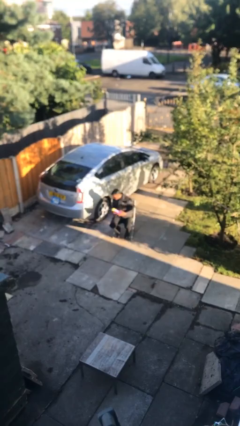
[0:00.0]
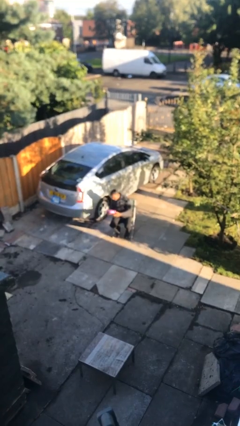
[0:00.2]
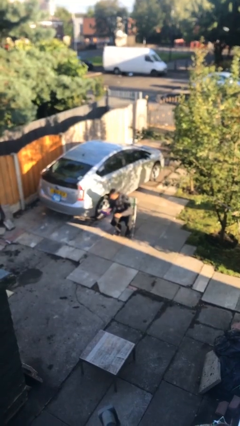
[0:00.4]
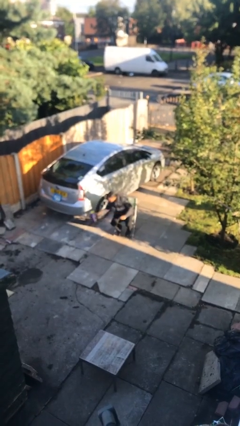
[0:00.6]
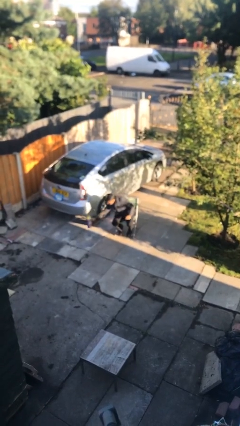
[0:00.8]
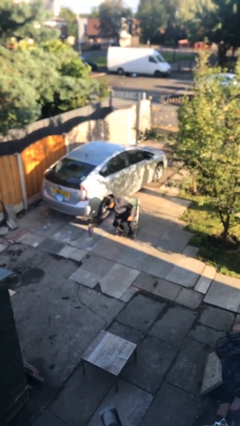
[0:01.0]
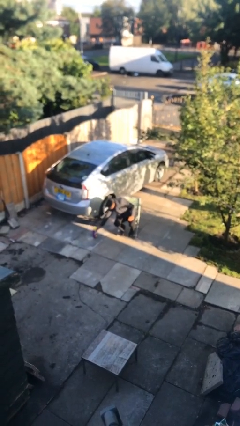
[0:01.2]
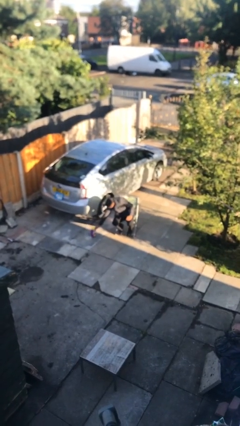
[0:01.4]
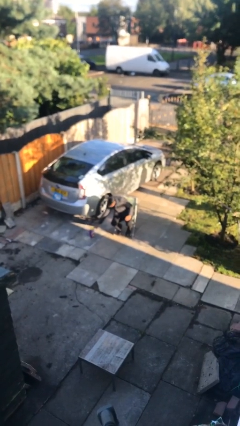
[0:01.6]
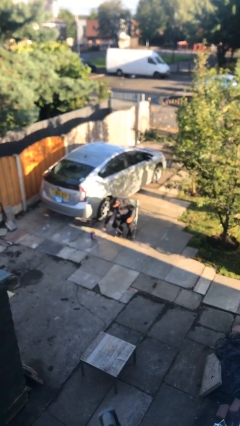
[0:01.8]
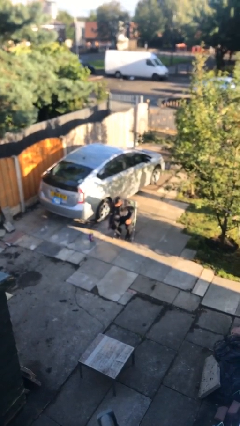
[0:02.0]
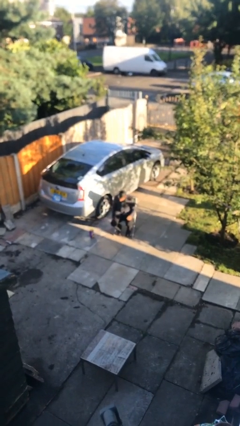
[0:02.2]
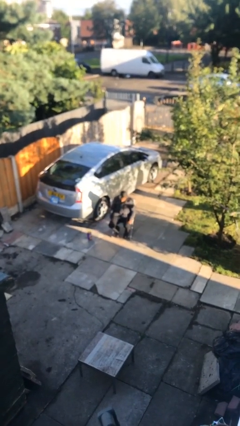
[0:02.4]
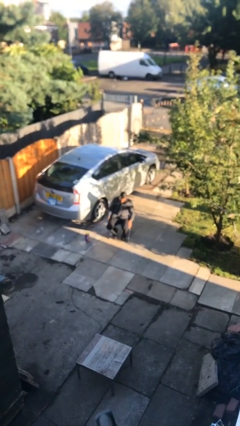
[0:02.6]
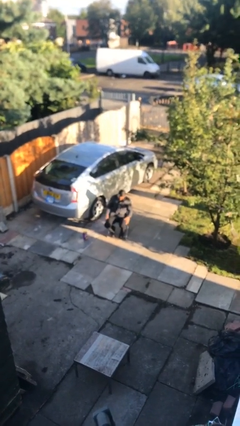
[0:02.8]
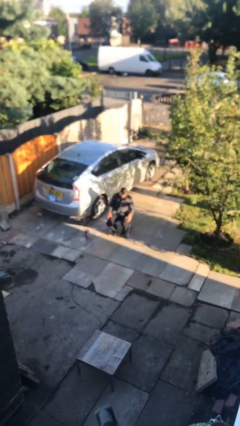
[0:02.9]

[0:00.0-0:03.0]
person puts down object on floor

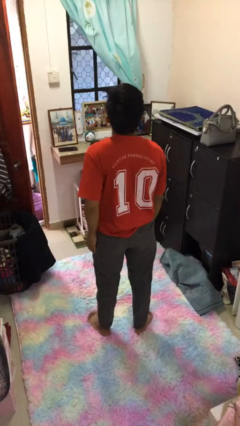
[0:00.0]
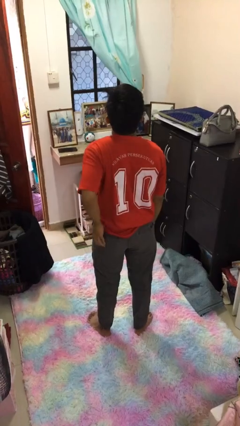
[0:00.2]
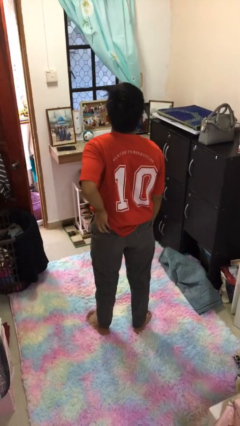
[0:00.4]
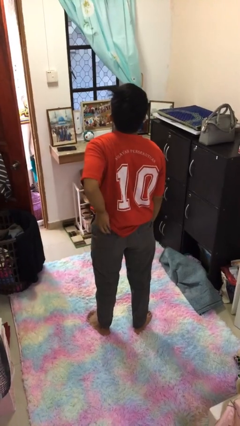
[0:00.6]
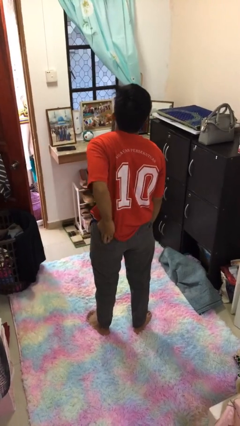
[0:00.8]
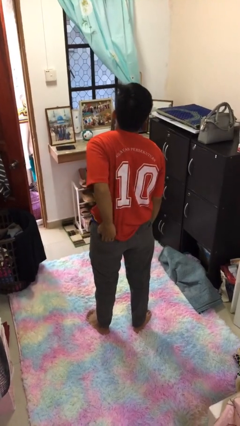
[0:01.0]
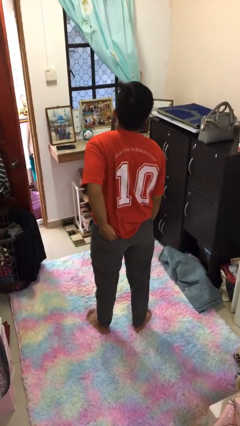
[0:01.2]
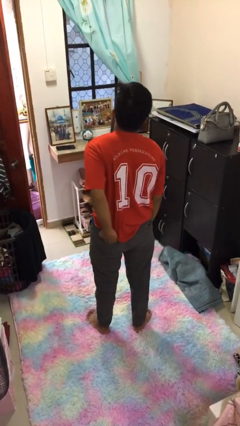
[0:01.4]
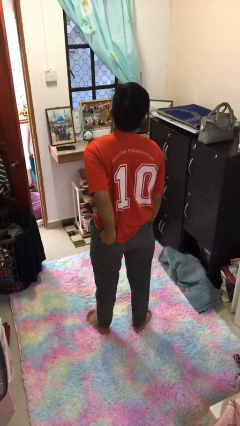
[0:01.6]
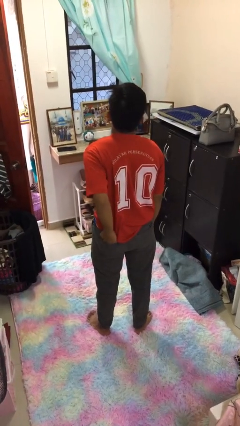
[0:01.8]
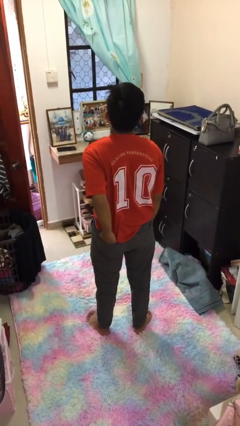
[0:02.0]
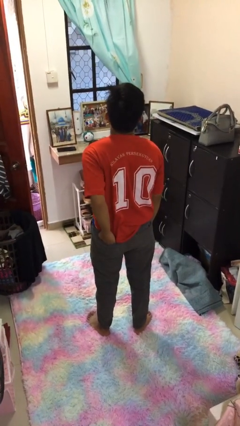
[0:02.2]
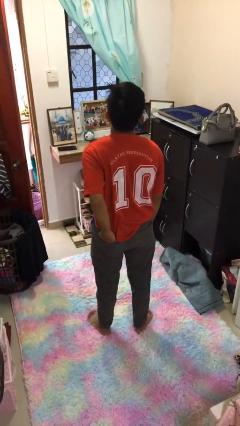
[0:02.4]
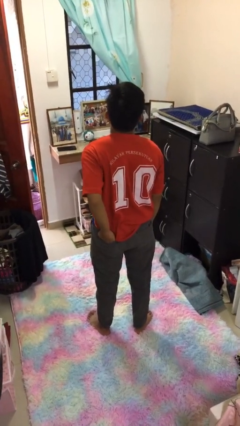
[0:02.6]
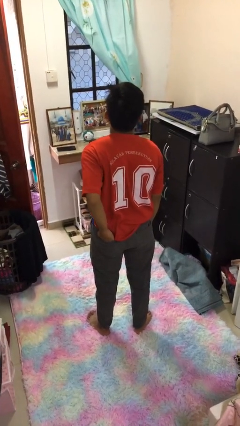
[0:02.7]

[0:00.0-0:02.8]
person puts hands in back pockets

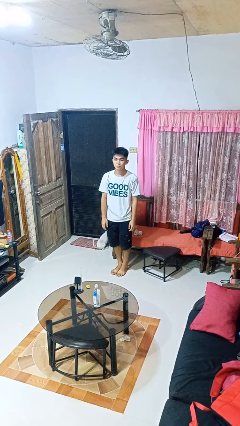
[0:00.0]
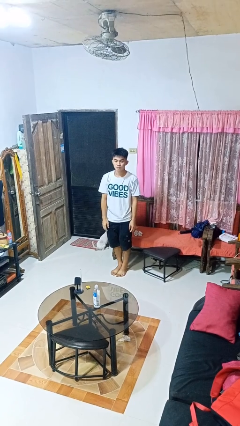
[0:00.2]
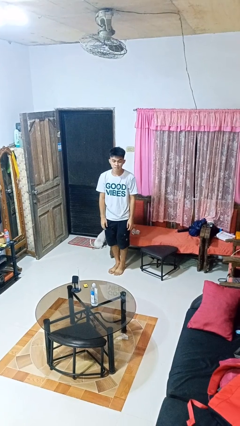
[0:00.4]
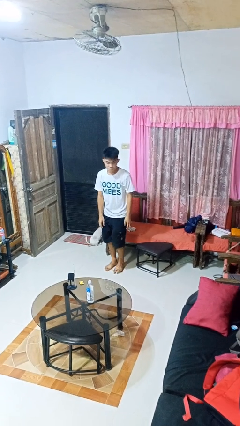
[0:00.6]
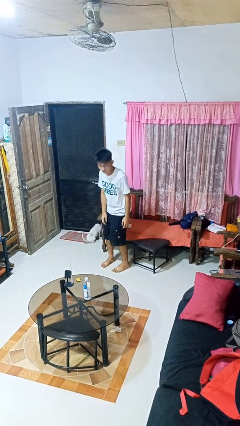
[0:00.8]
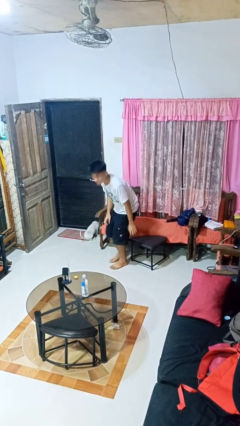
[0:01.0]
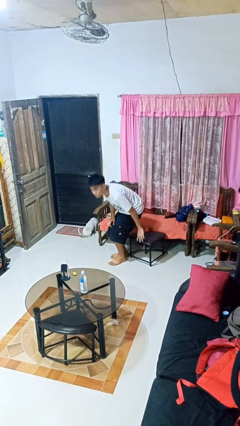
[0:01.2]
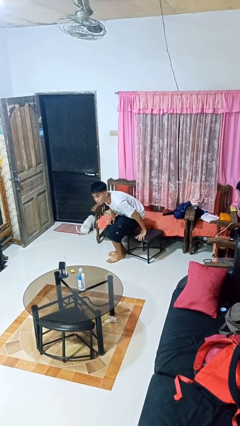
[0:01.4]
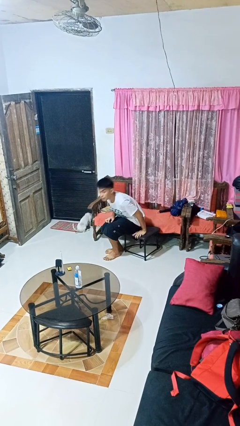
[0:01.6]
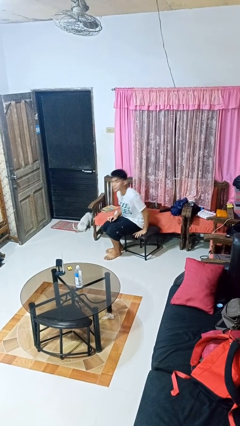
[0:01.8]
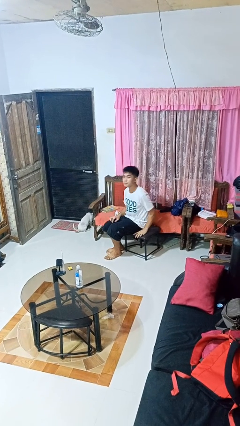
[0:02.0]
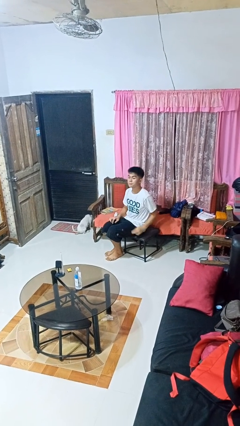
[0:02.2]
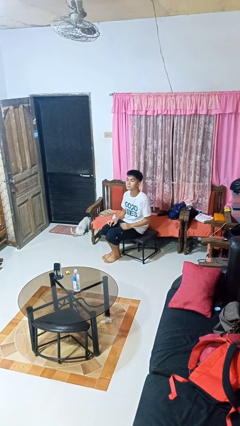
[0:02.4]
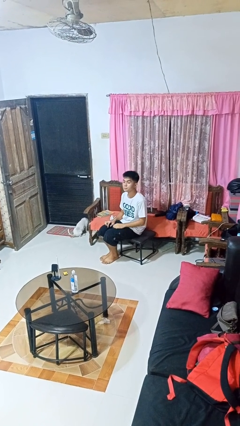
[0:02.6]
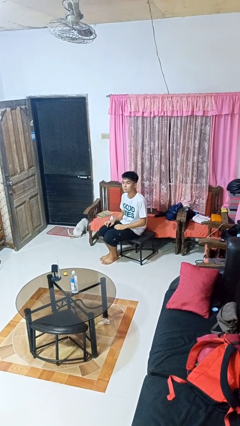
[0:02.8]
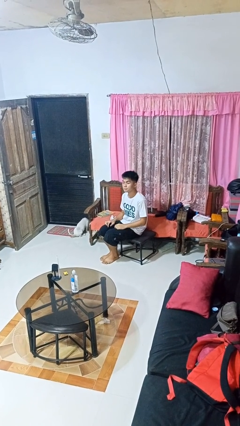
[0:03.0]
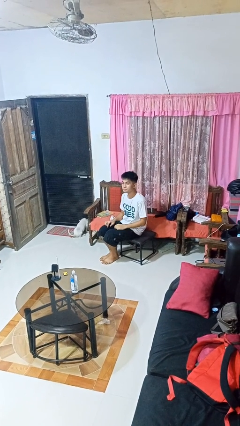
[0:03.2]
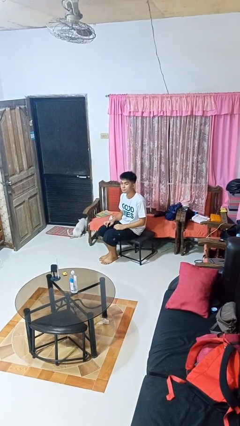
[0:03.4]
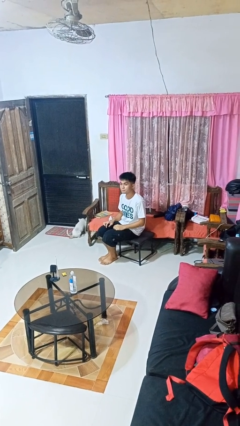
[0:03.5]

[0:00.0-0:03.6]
person sits down

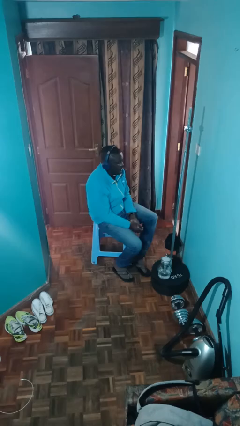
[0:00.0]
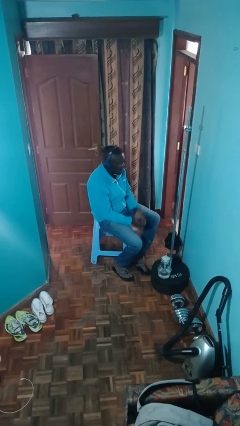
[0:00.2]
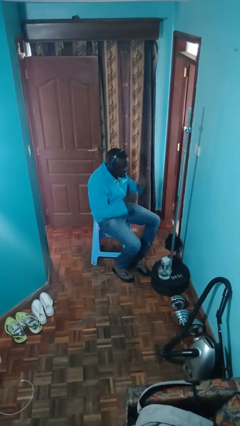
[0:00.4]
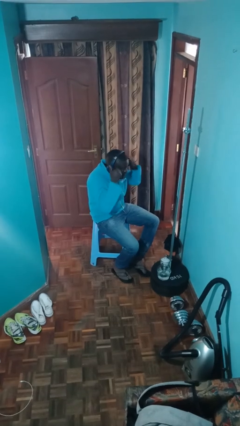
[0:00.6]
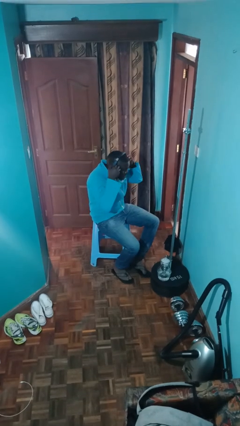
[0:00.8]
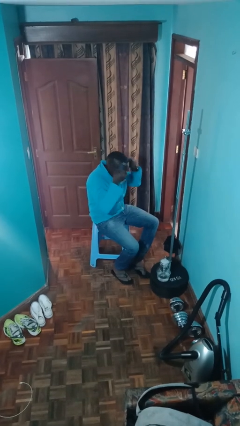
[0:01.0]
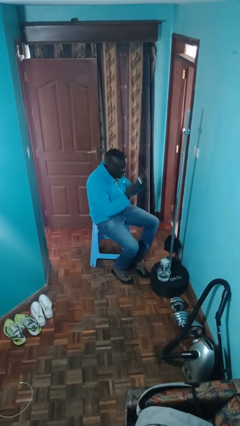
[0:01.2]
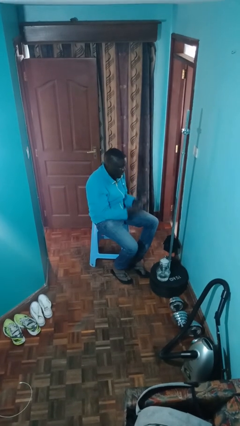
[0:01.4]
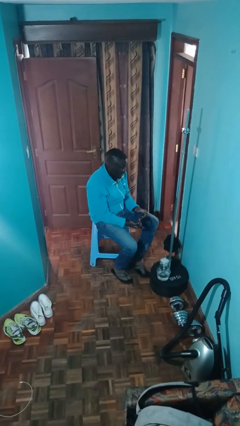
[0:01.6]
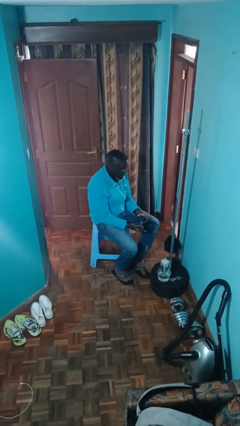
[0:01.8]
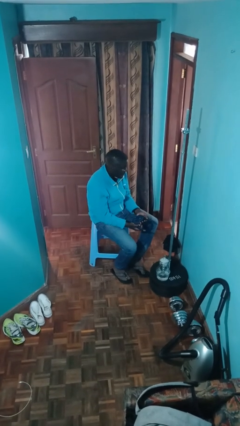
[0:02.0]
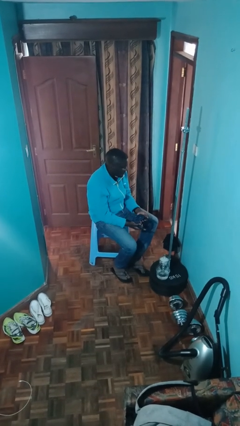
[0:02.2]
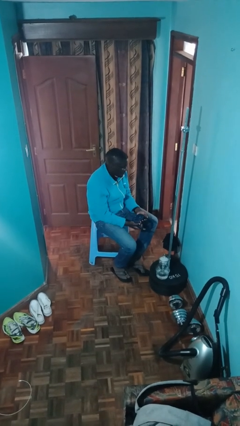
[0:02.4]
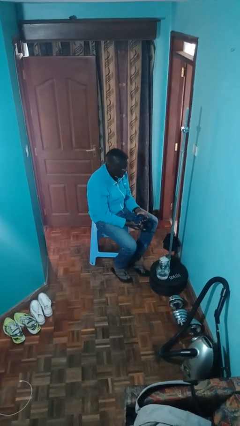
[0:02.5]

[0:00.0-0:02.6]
person takes off headphones

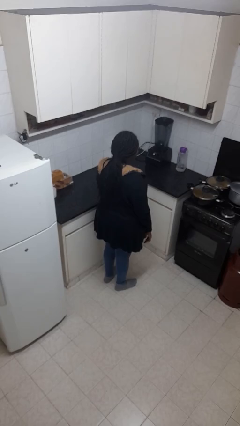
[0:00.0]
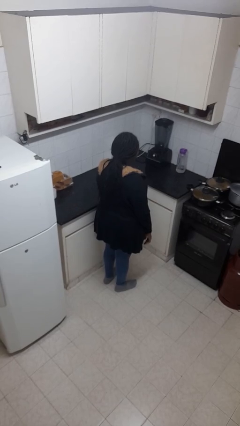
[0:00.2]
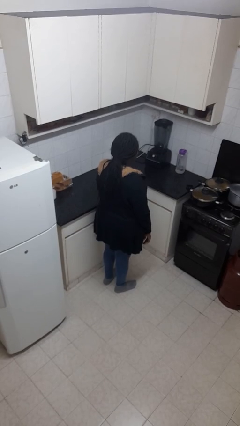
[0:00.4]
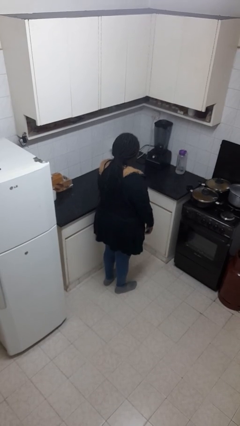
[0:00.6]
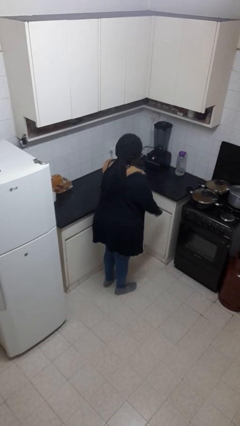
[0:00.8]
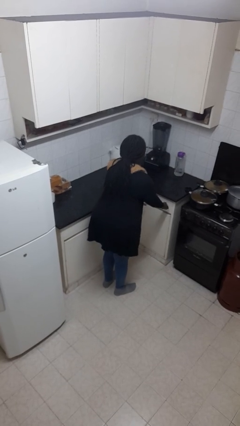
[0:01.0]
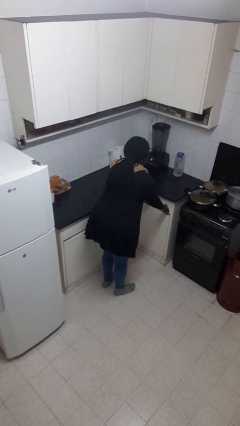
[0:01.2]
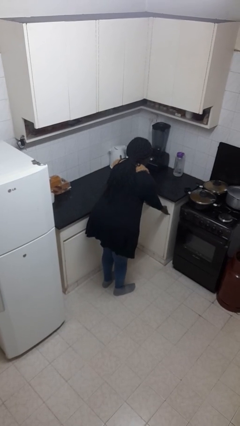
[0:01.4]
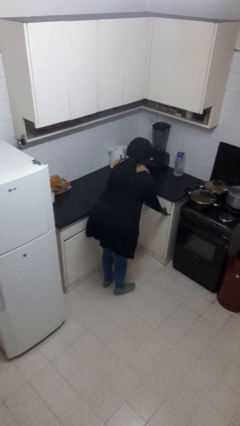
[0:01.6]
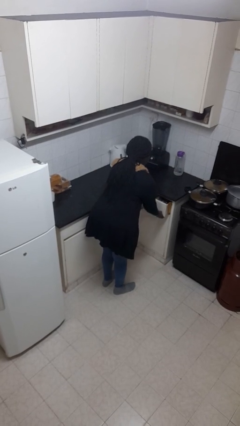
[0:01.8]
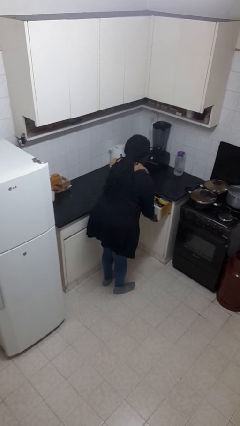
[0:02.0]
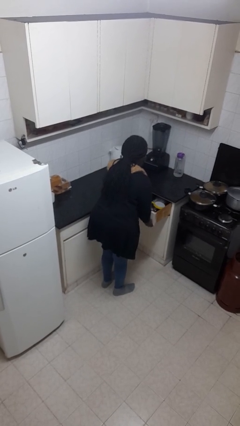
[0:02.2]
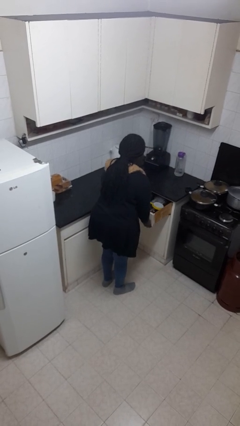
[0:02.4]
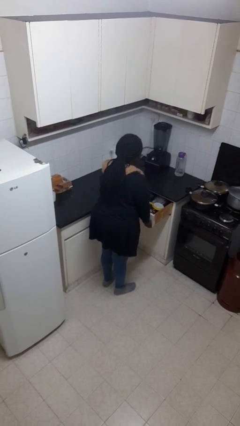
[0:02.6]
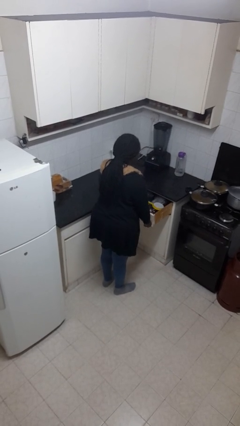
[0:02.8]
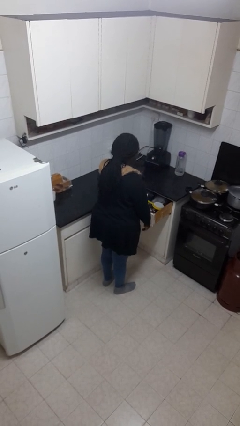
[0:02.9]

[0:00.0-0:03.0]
person opens kitchen drawer

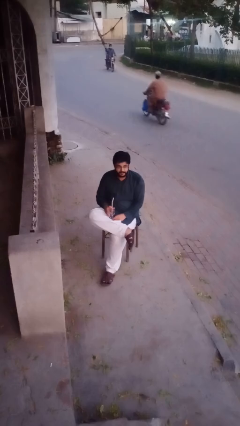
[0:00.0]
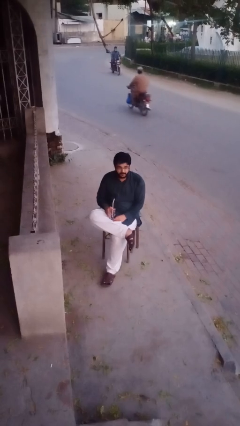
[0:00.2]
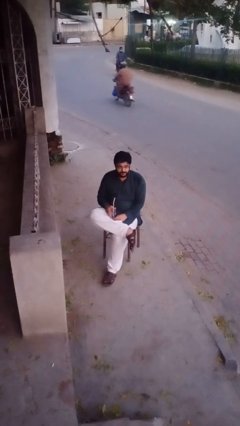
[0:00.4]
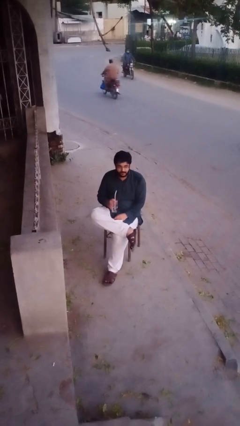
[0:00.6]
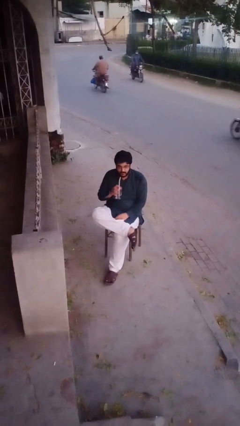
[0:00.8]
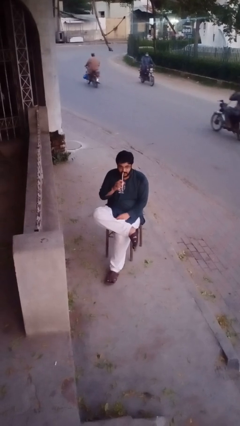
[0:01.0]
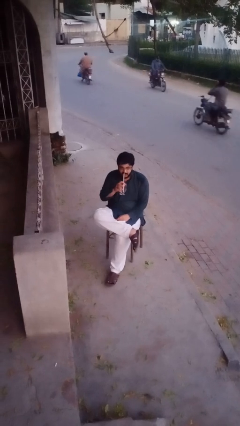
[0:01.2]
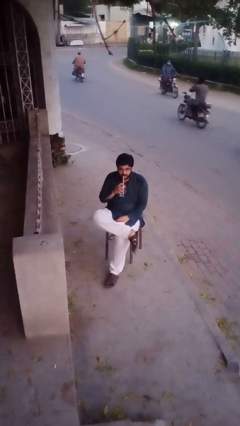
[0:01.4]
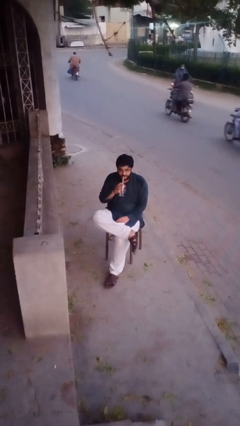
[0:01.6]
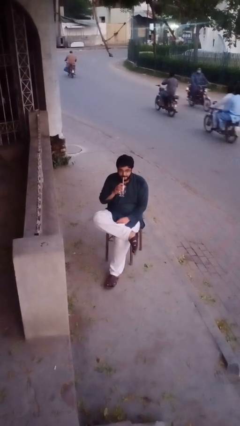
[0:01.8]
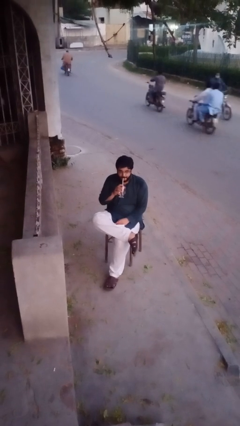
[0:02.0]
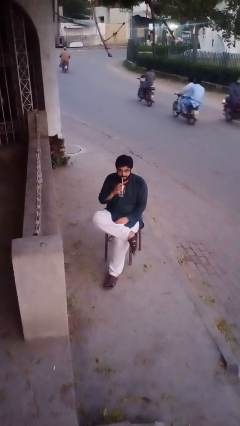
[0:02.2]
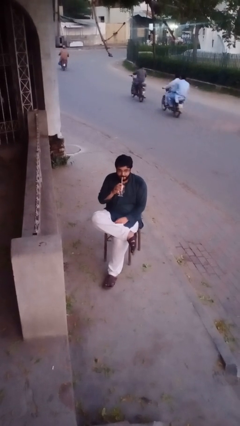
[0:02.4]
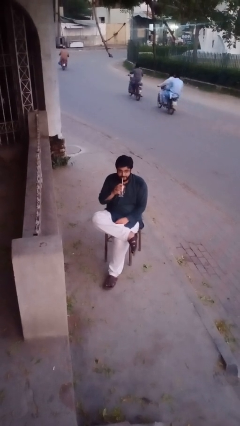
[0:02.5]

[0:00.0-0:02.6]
person drinks from straw
